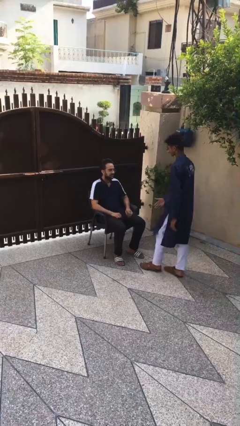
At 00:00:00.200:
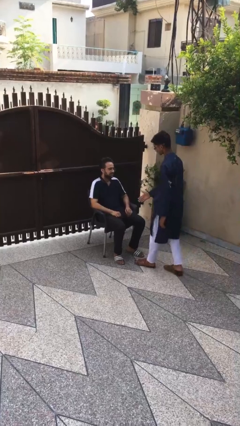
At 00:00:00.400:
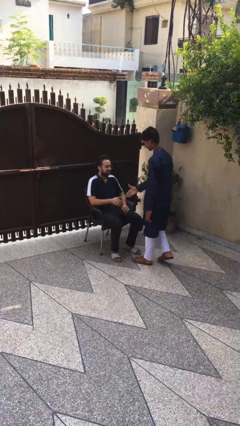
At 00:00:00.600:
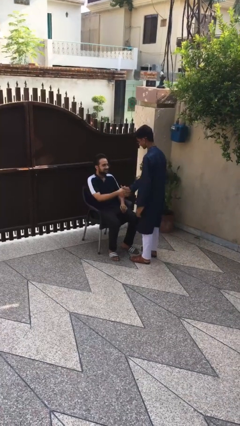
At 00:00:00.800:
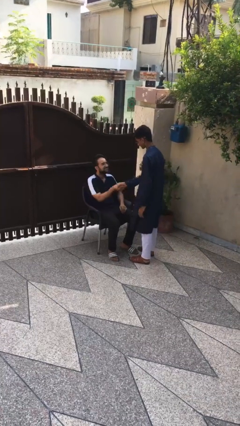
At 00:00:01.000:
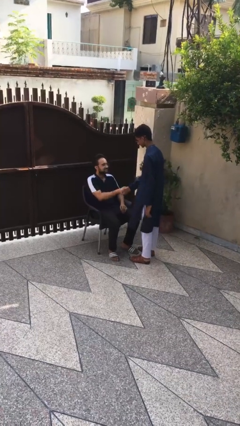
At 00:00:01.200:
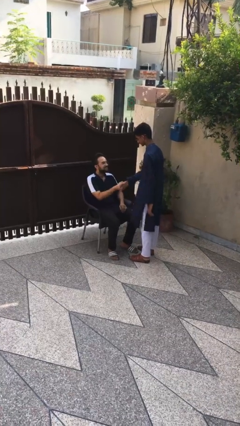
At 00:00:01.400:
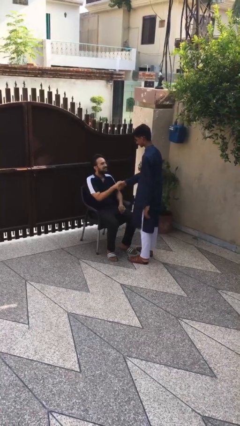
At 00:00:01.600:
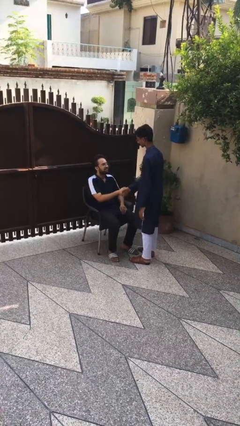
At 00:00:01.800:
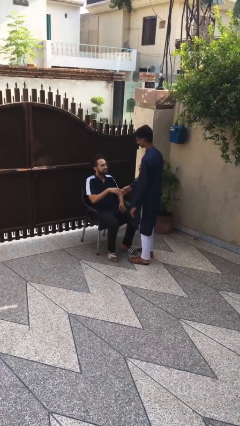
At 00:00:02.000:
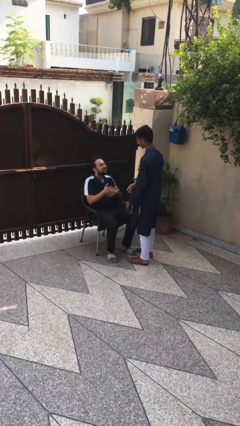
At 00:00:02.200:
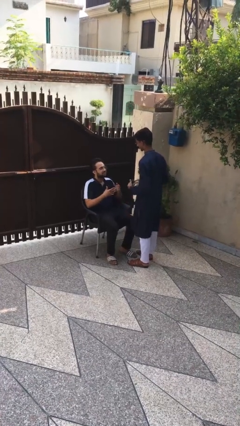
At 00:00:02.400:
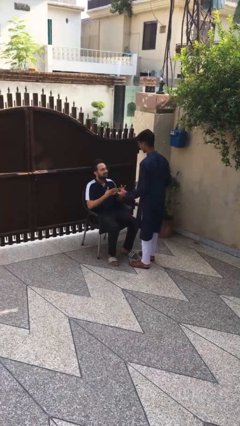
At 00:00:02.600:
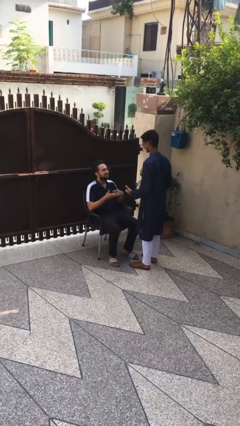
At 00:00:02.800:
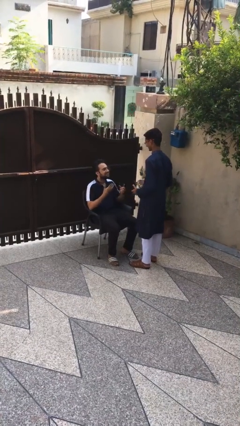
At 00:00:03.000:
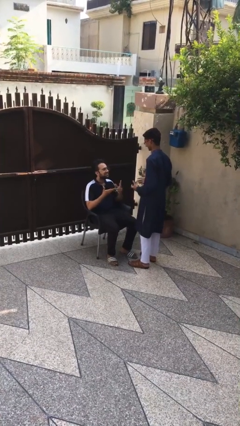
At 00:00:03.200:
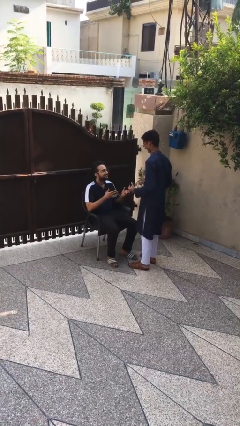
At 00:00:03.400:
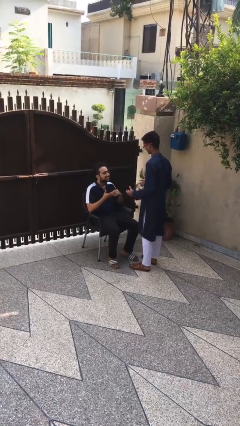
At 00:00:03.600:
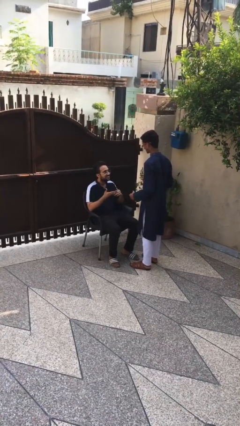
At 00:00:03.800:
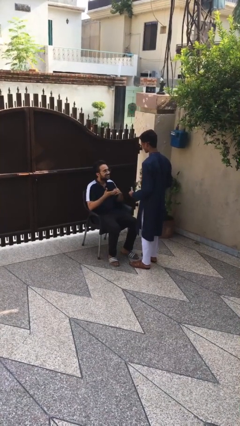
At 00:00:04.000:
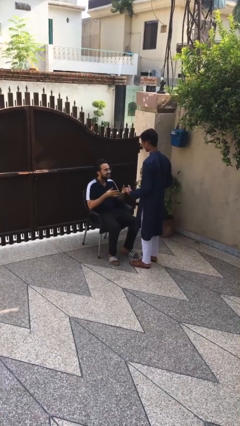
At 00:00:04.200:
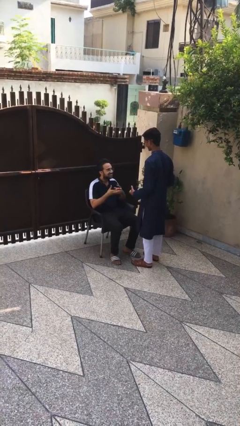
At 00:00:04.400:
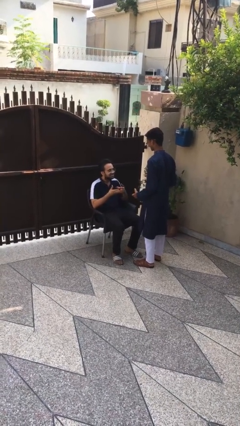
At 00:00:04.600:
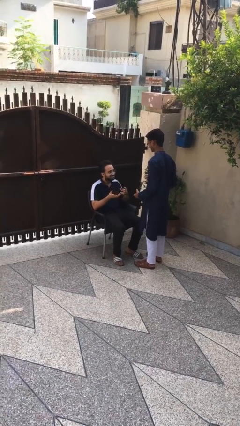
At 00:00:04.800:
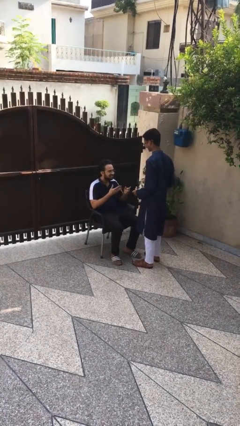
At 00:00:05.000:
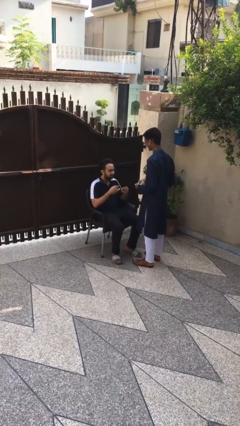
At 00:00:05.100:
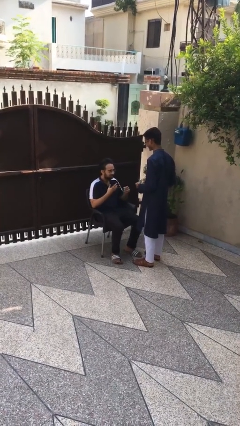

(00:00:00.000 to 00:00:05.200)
person shakes hand

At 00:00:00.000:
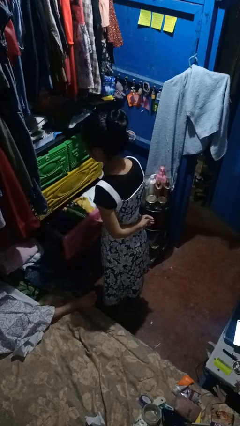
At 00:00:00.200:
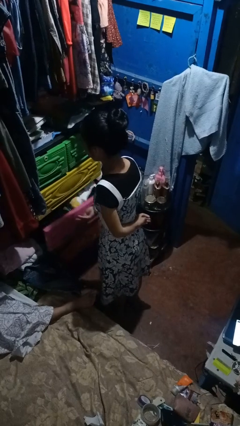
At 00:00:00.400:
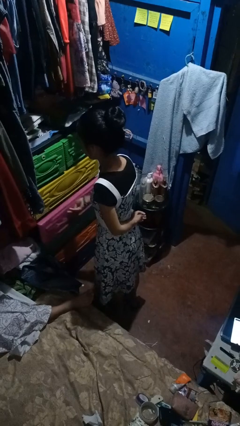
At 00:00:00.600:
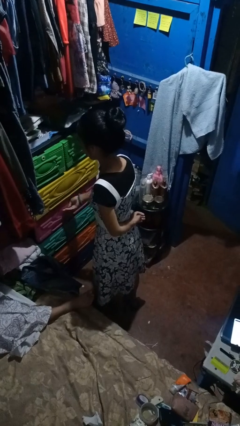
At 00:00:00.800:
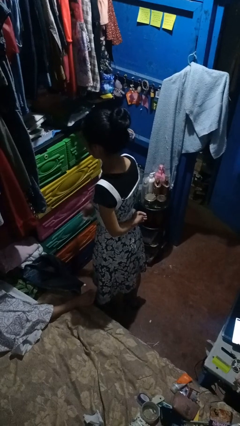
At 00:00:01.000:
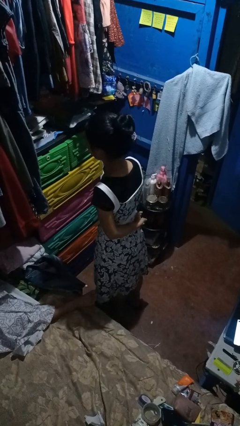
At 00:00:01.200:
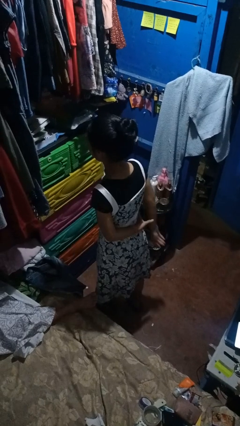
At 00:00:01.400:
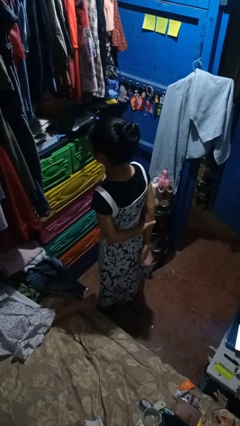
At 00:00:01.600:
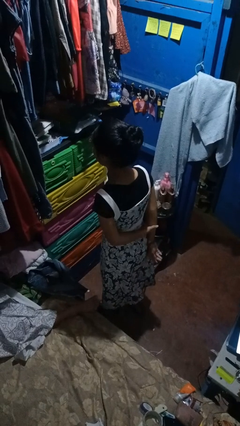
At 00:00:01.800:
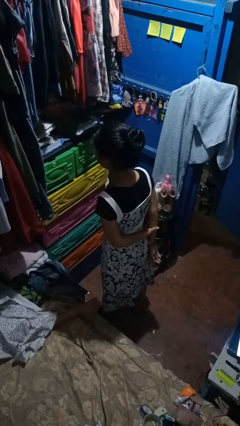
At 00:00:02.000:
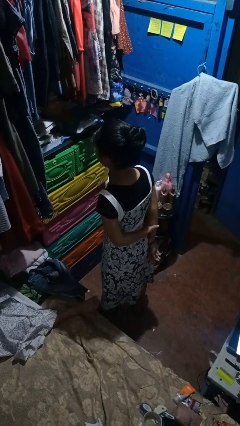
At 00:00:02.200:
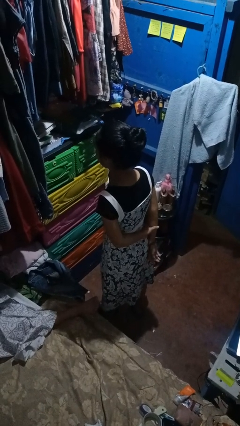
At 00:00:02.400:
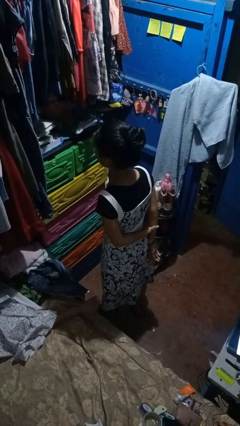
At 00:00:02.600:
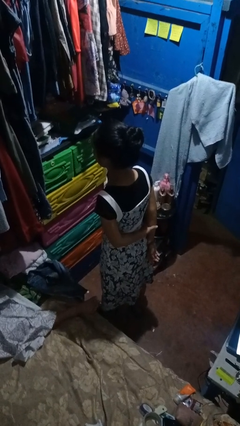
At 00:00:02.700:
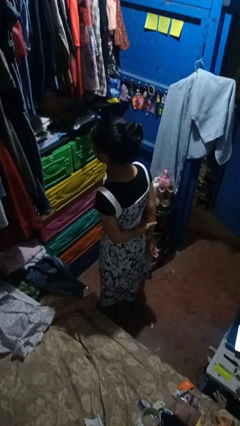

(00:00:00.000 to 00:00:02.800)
person closes dresser drawer

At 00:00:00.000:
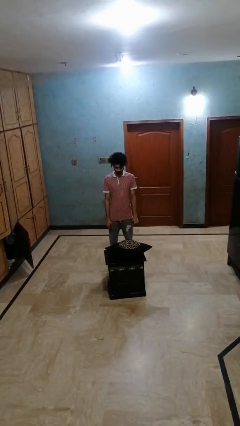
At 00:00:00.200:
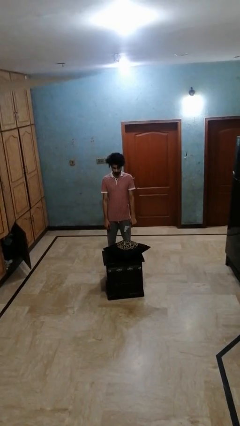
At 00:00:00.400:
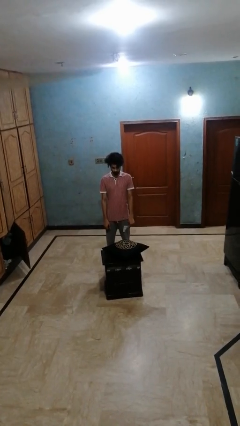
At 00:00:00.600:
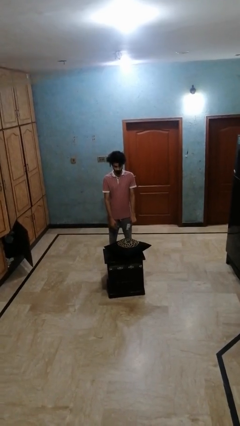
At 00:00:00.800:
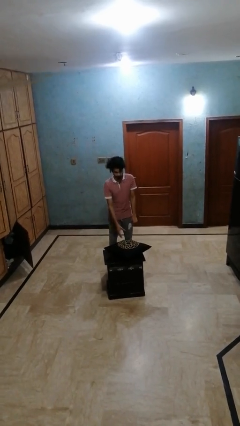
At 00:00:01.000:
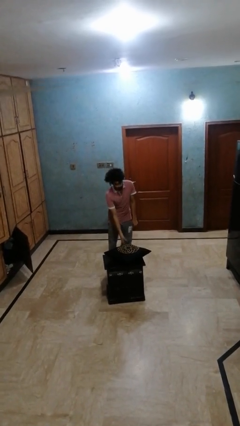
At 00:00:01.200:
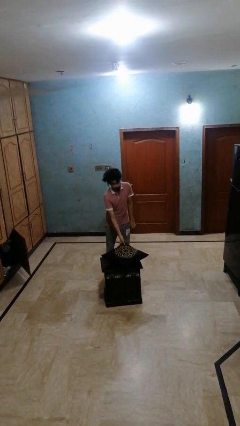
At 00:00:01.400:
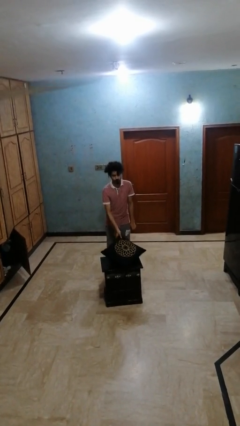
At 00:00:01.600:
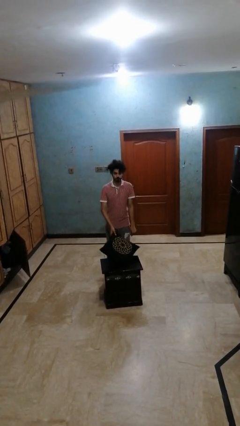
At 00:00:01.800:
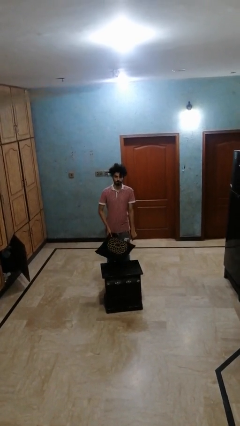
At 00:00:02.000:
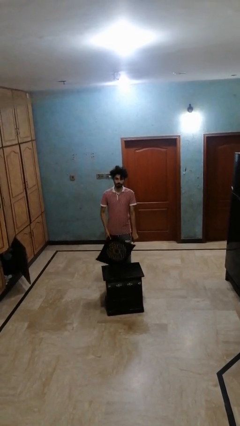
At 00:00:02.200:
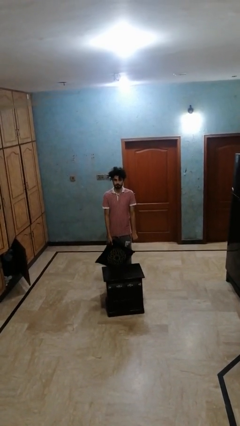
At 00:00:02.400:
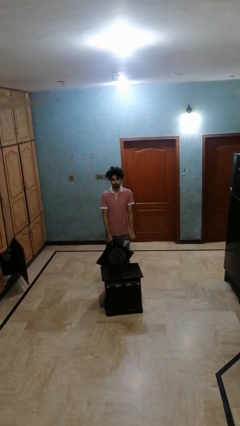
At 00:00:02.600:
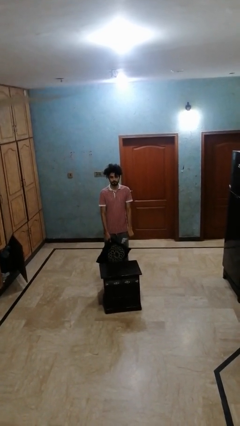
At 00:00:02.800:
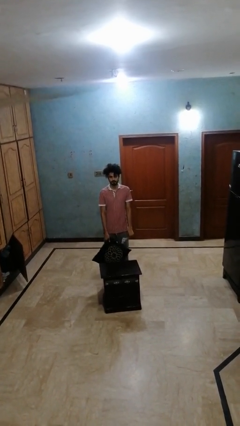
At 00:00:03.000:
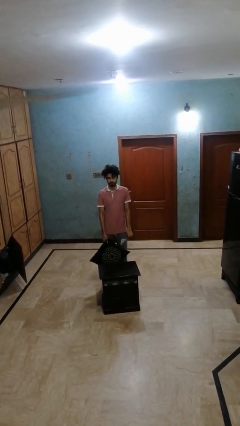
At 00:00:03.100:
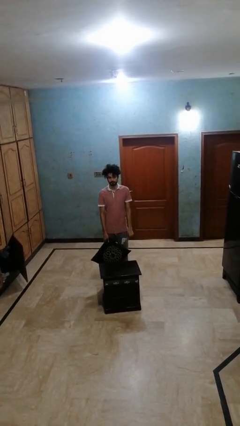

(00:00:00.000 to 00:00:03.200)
person picks up object from table

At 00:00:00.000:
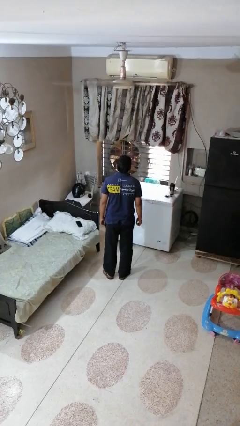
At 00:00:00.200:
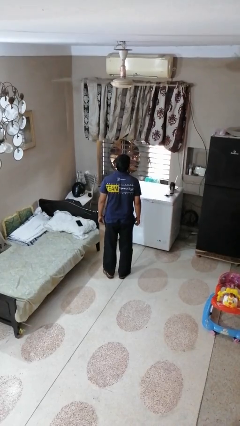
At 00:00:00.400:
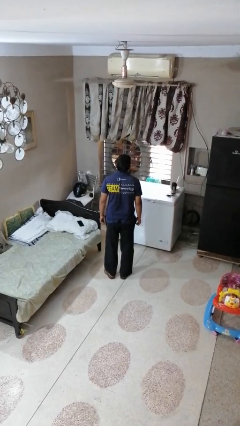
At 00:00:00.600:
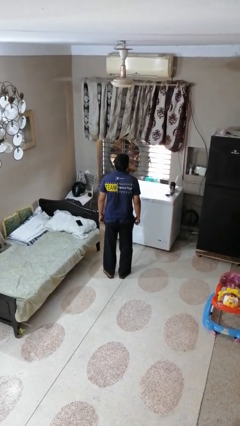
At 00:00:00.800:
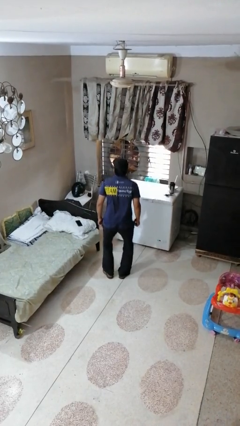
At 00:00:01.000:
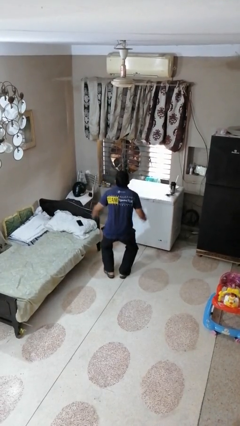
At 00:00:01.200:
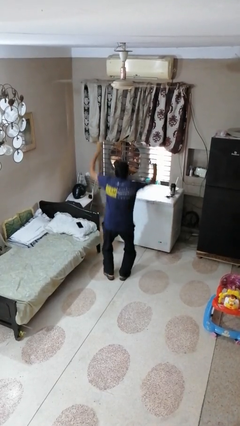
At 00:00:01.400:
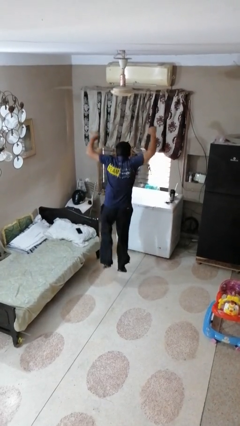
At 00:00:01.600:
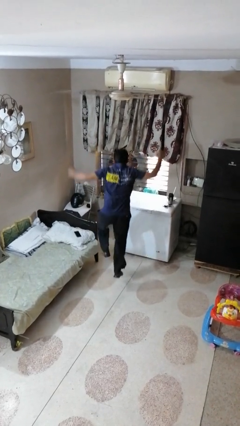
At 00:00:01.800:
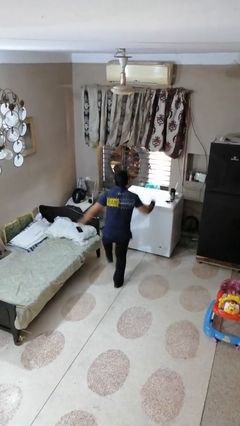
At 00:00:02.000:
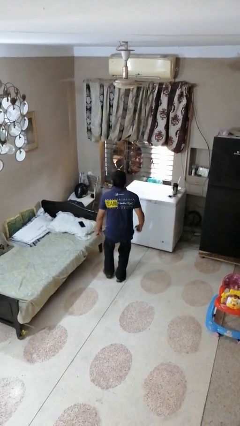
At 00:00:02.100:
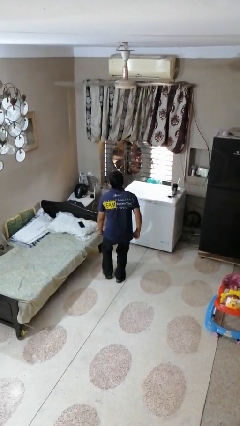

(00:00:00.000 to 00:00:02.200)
person jumps

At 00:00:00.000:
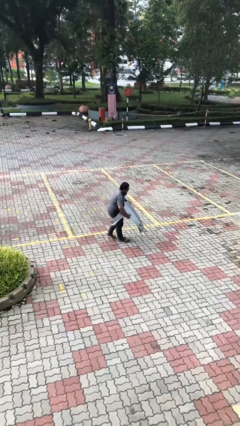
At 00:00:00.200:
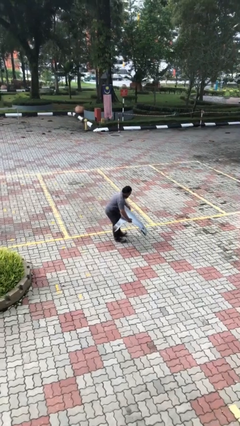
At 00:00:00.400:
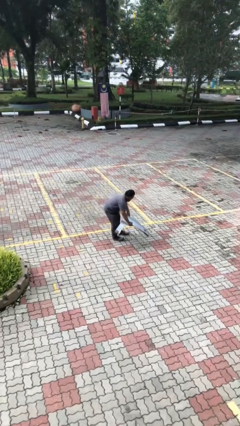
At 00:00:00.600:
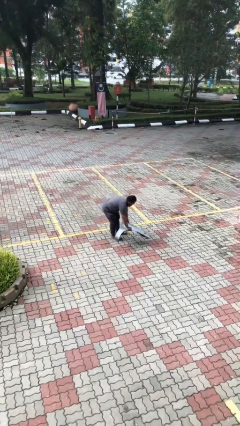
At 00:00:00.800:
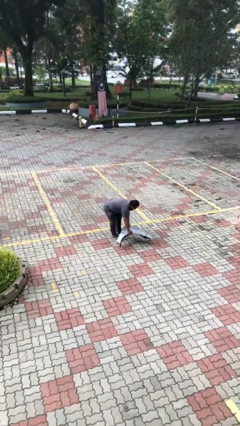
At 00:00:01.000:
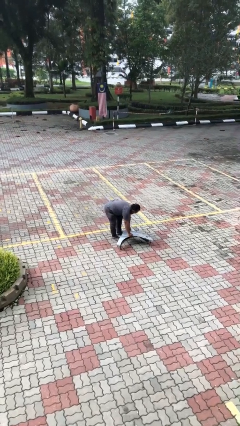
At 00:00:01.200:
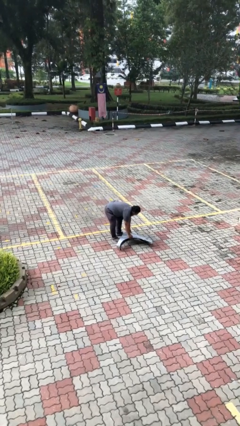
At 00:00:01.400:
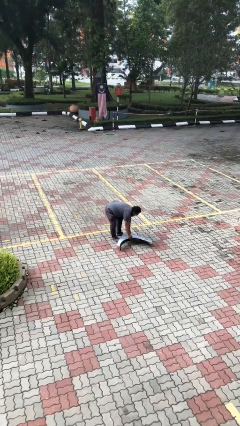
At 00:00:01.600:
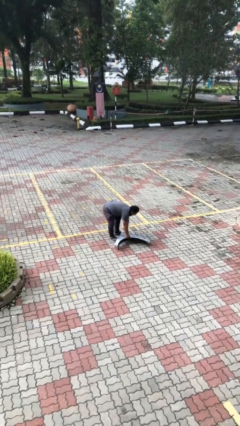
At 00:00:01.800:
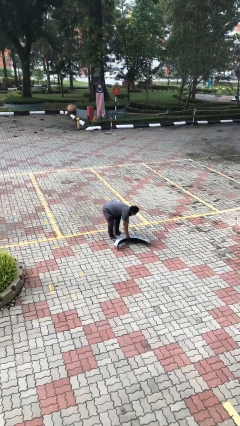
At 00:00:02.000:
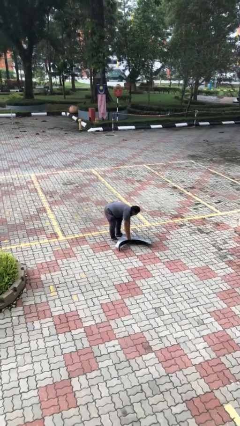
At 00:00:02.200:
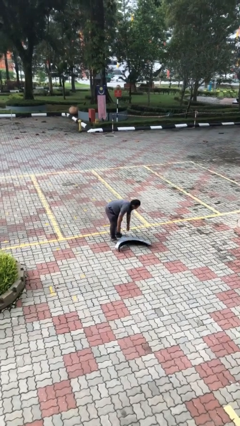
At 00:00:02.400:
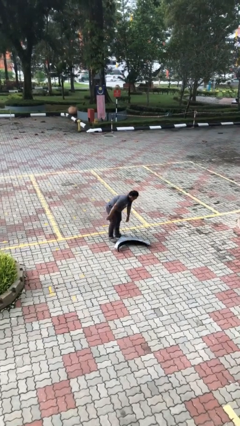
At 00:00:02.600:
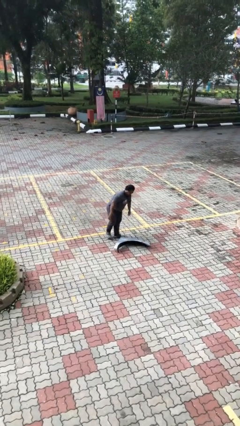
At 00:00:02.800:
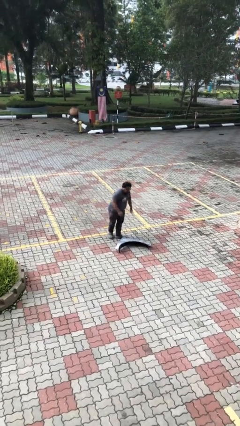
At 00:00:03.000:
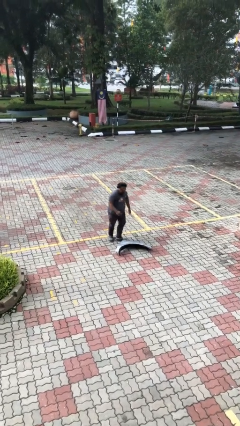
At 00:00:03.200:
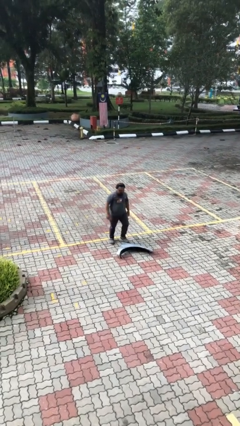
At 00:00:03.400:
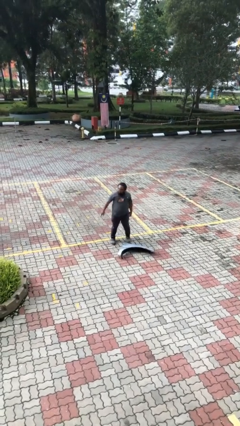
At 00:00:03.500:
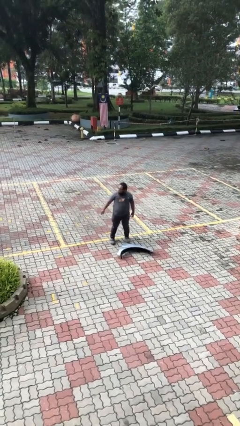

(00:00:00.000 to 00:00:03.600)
person puts down object on floor

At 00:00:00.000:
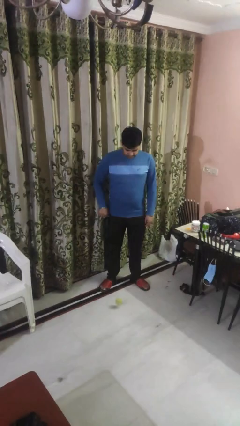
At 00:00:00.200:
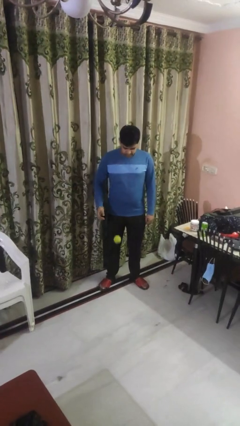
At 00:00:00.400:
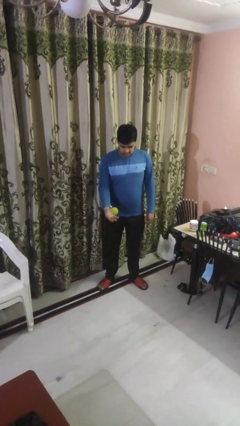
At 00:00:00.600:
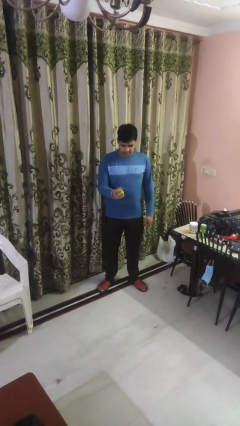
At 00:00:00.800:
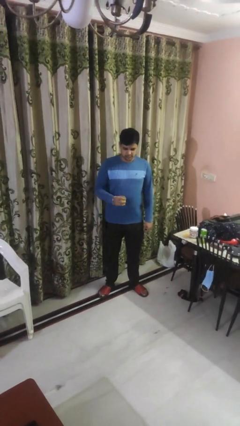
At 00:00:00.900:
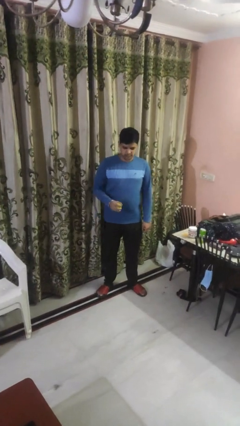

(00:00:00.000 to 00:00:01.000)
person bounces ball on floor
